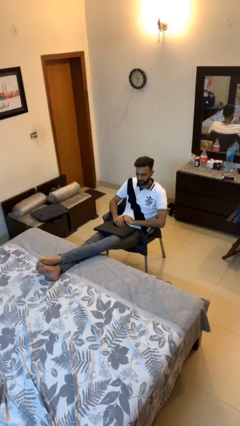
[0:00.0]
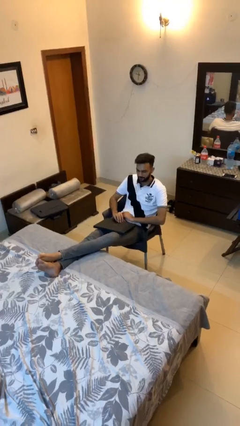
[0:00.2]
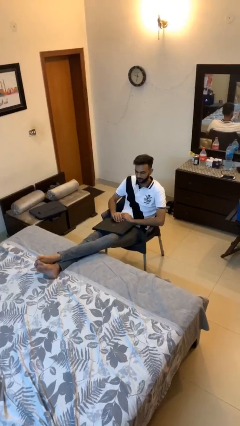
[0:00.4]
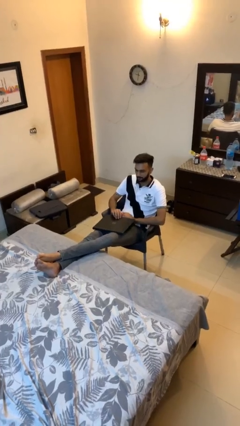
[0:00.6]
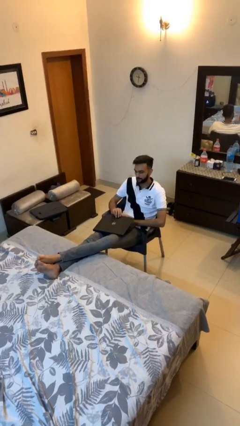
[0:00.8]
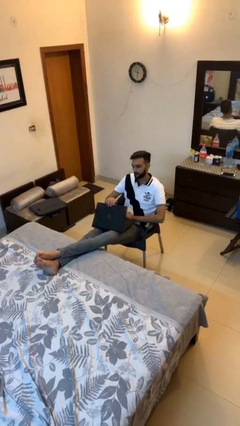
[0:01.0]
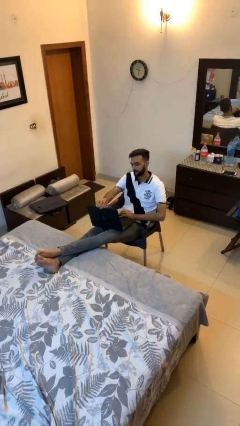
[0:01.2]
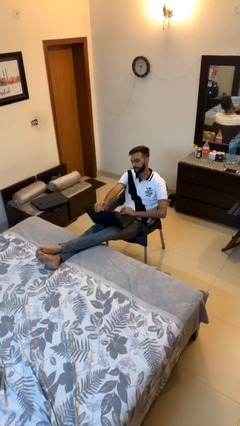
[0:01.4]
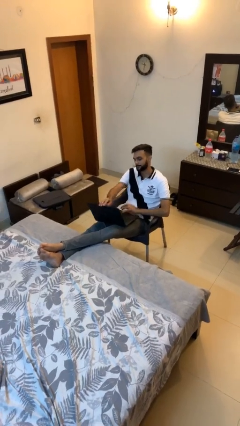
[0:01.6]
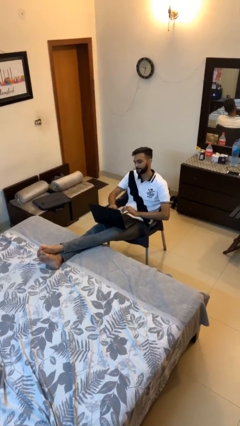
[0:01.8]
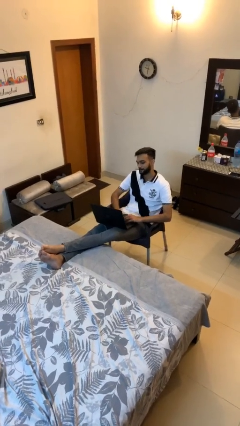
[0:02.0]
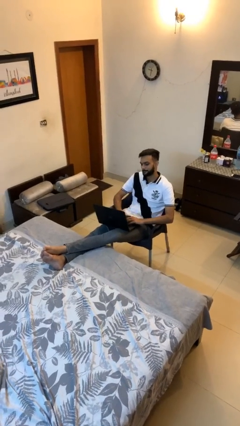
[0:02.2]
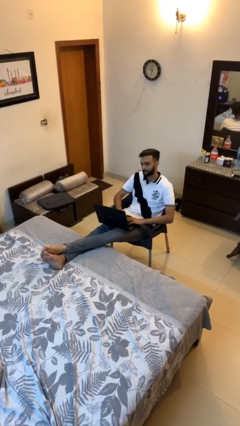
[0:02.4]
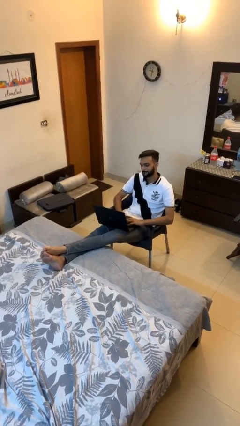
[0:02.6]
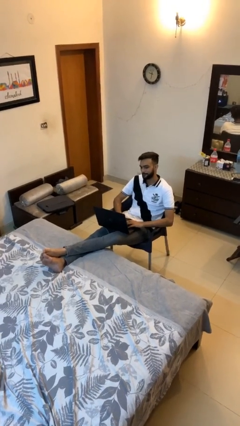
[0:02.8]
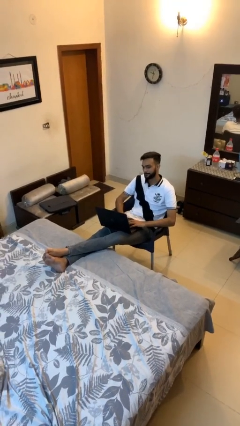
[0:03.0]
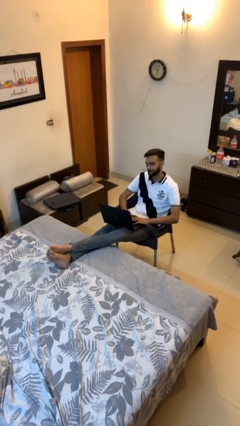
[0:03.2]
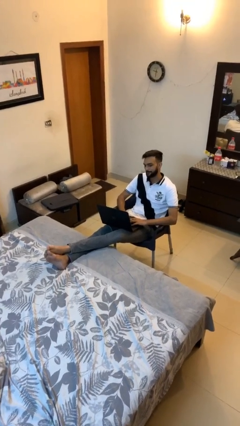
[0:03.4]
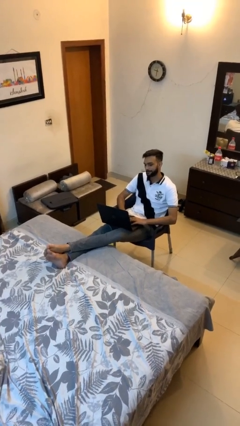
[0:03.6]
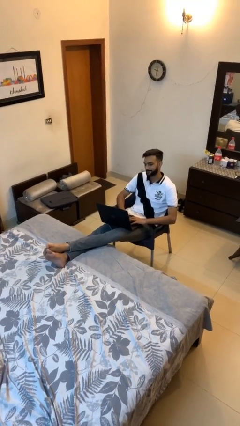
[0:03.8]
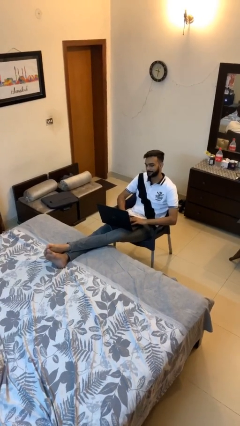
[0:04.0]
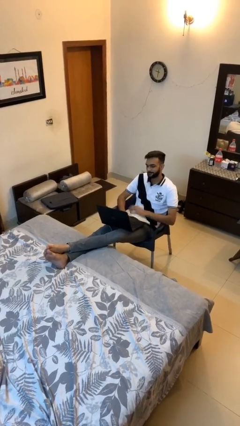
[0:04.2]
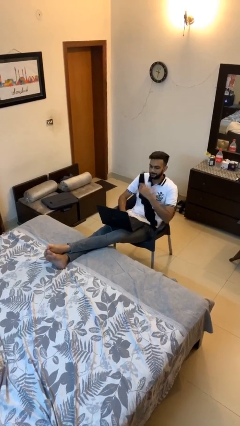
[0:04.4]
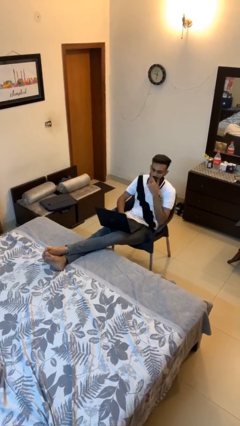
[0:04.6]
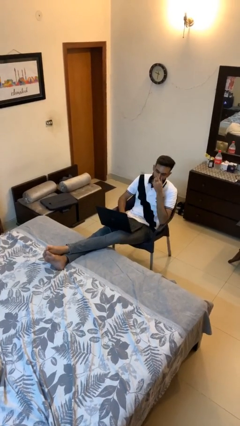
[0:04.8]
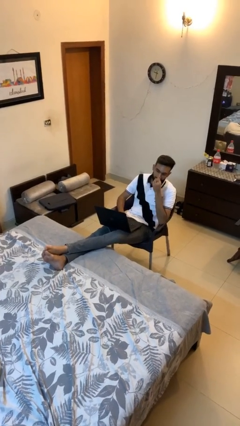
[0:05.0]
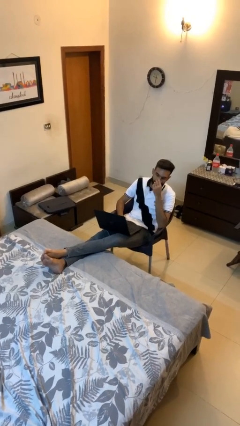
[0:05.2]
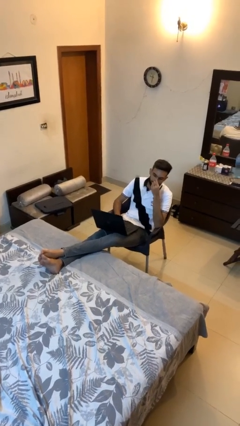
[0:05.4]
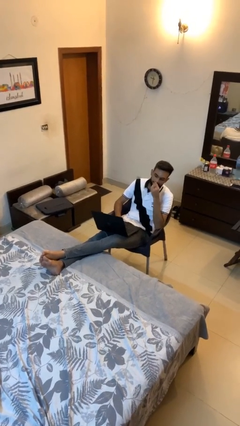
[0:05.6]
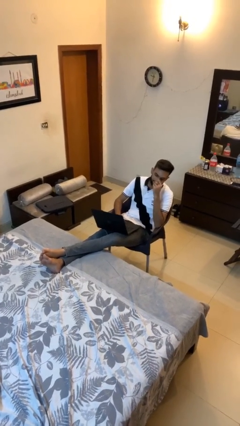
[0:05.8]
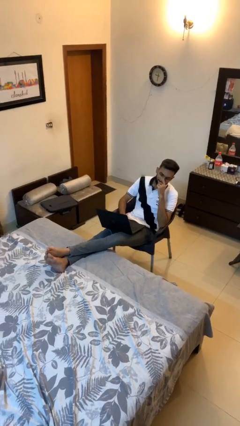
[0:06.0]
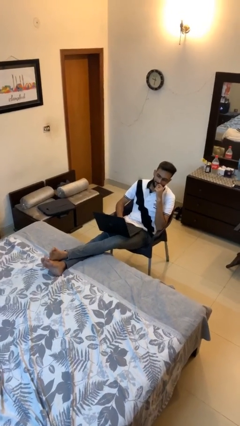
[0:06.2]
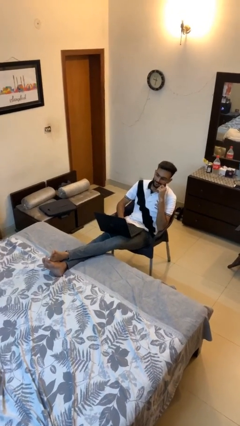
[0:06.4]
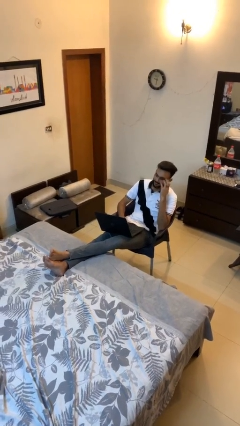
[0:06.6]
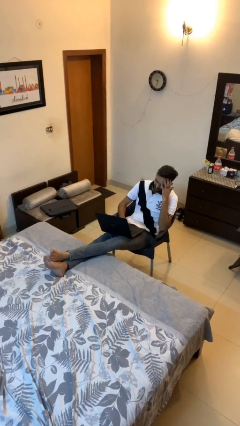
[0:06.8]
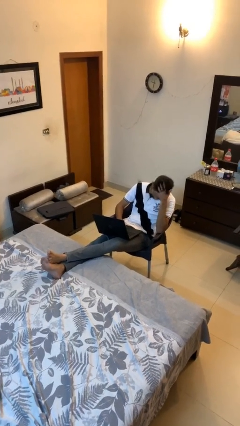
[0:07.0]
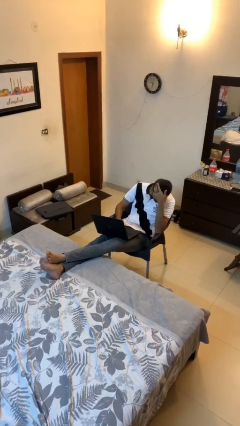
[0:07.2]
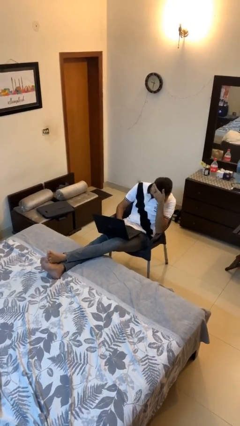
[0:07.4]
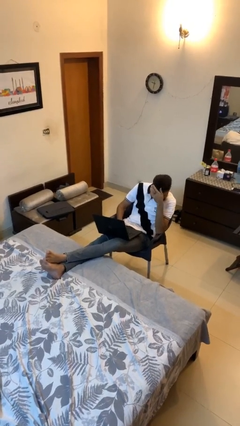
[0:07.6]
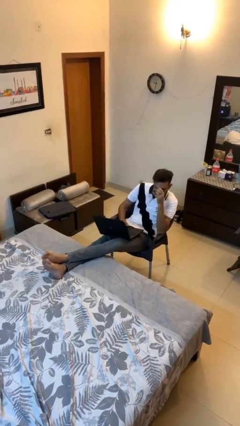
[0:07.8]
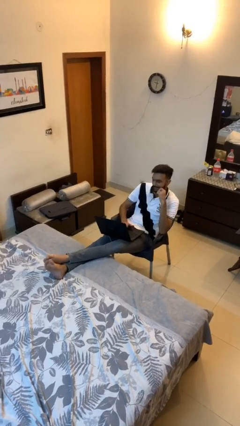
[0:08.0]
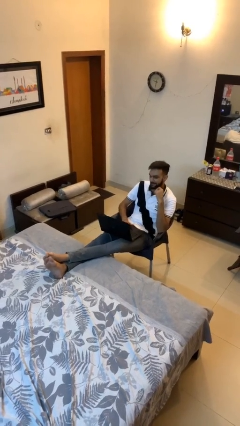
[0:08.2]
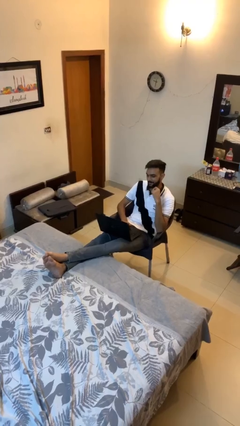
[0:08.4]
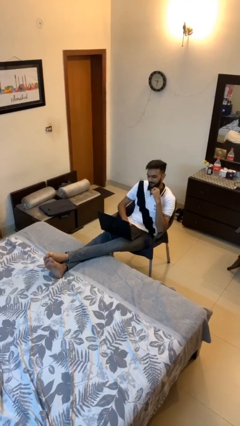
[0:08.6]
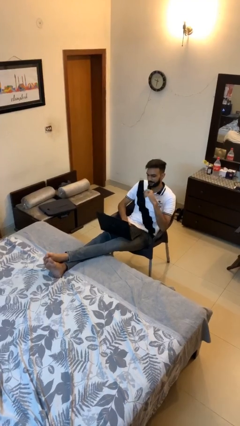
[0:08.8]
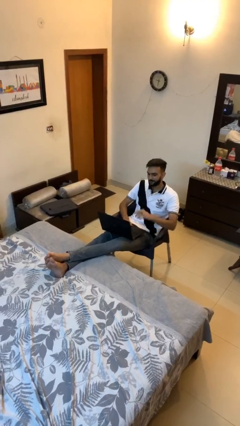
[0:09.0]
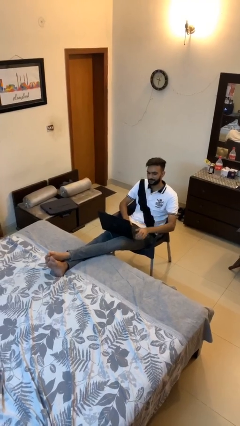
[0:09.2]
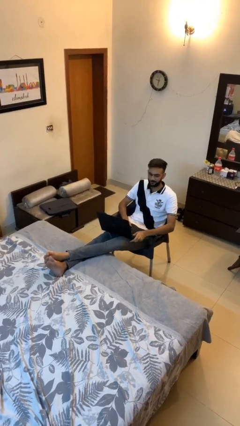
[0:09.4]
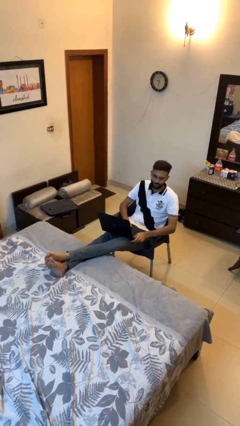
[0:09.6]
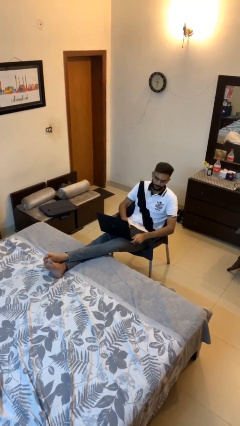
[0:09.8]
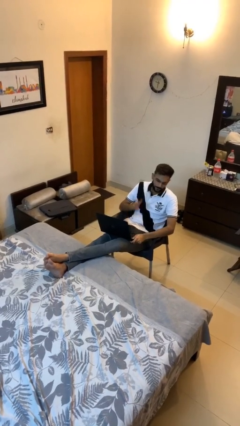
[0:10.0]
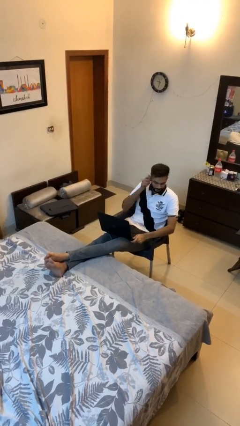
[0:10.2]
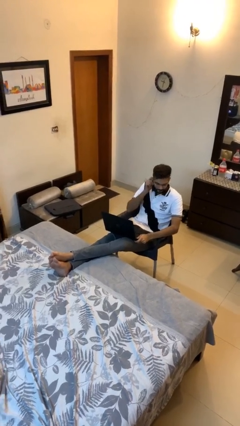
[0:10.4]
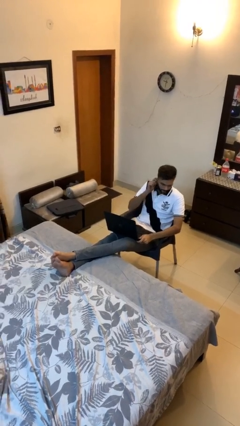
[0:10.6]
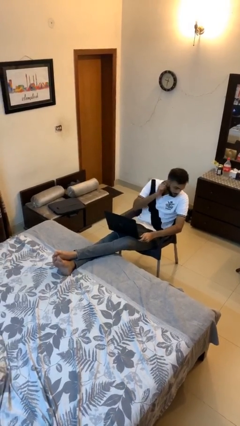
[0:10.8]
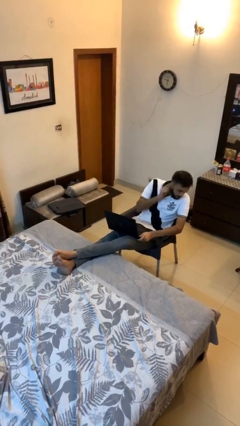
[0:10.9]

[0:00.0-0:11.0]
person interacts with laptop

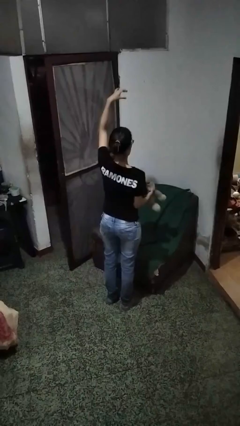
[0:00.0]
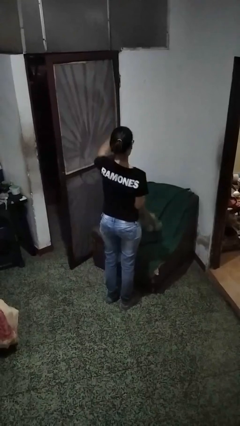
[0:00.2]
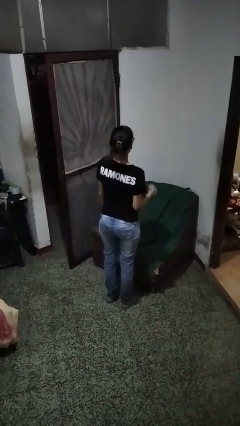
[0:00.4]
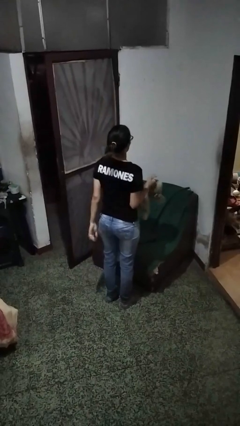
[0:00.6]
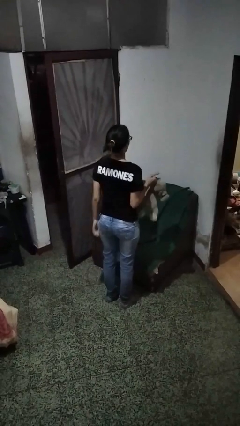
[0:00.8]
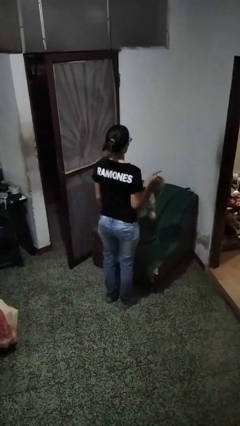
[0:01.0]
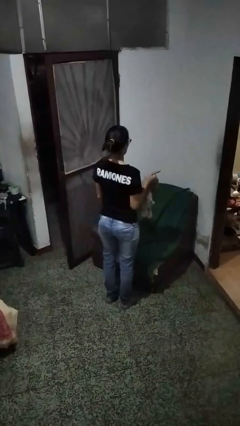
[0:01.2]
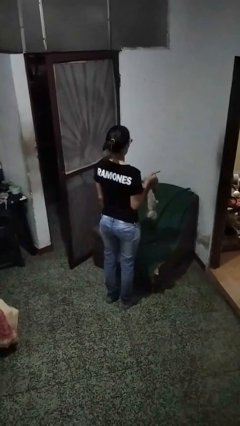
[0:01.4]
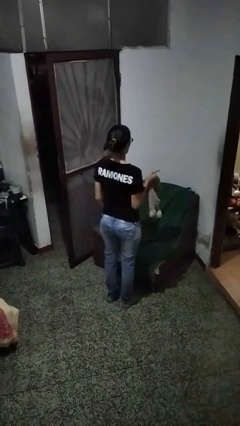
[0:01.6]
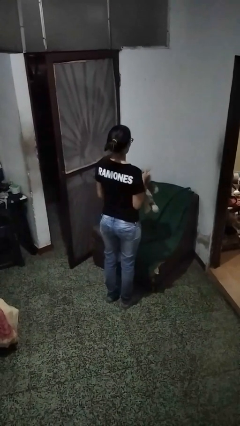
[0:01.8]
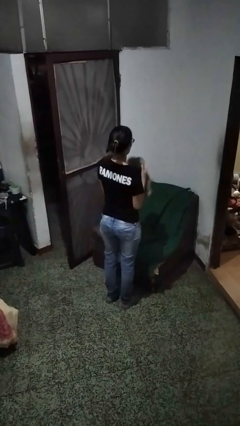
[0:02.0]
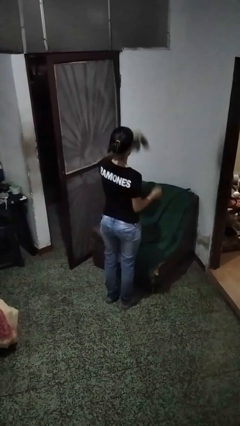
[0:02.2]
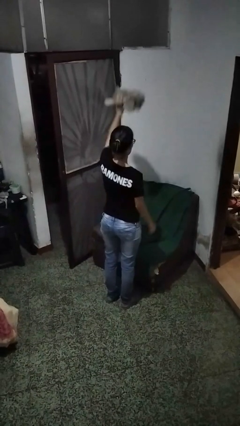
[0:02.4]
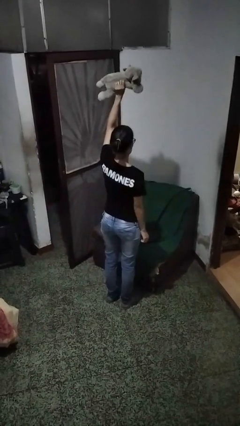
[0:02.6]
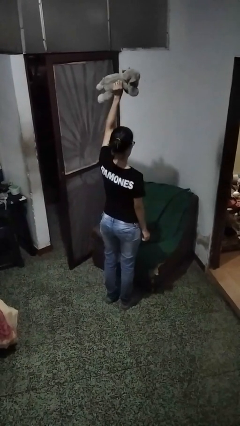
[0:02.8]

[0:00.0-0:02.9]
person catches dropped object

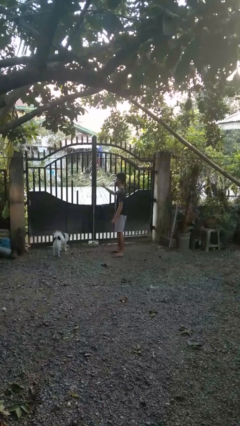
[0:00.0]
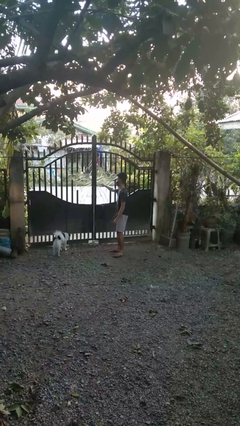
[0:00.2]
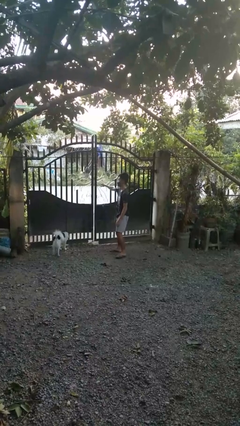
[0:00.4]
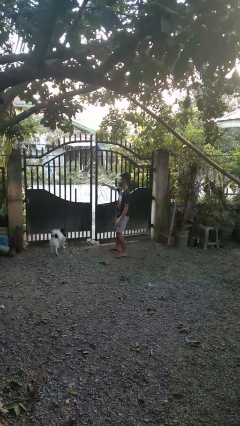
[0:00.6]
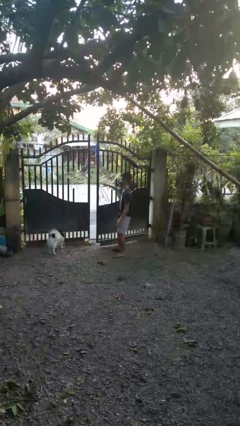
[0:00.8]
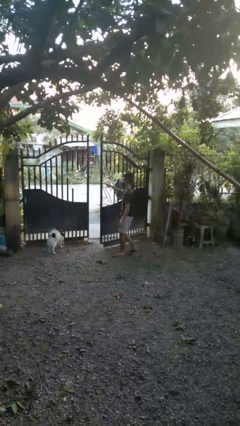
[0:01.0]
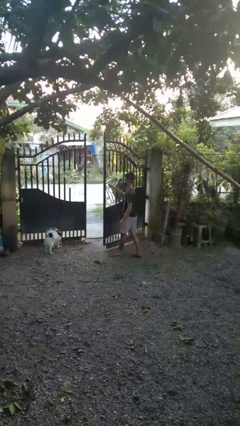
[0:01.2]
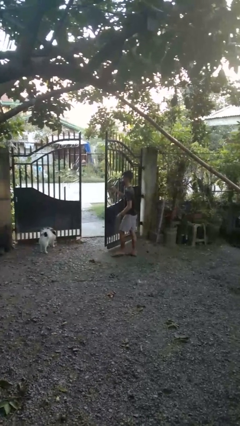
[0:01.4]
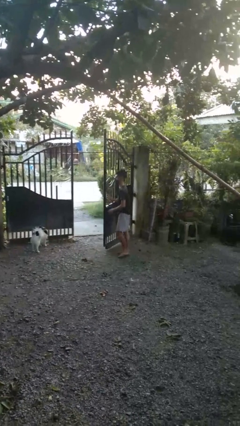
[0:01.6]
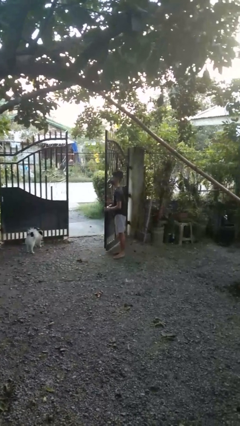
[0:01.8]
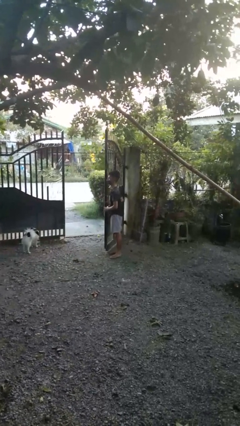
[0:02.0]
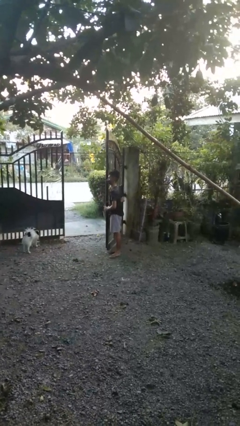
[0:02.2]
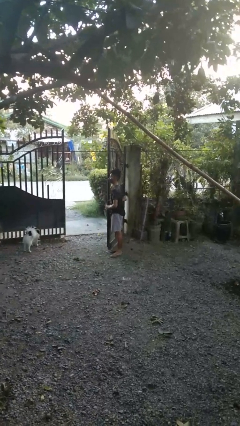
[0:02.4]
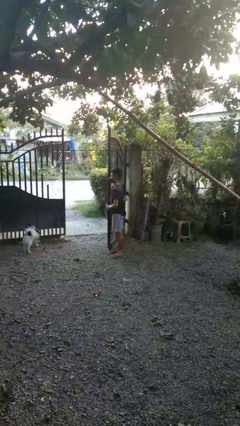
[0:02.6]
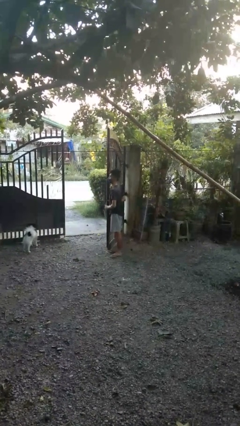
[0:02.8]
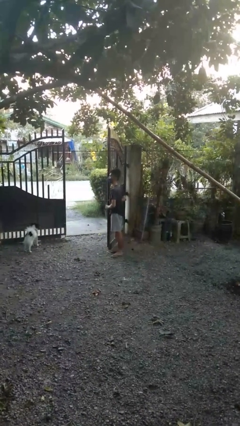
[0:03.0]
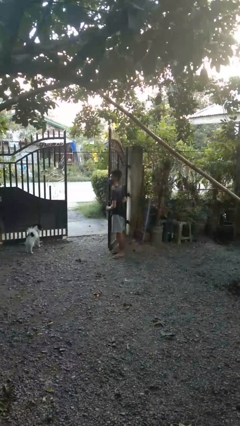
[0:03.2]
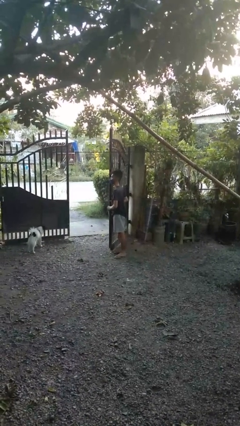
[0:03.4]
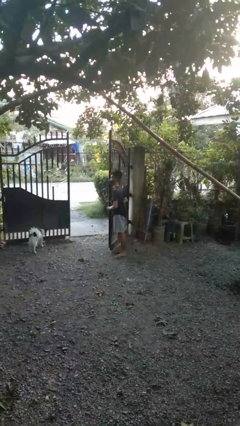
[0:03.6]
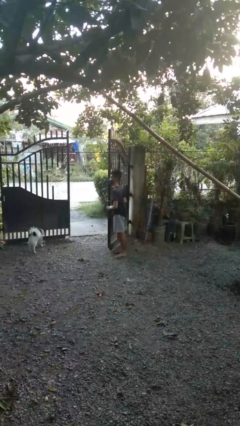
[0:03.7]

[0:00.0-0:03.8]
person opens gate

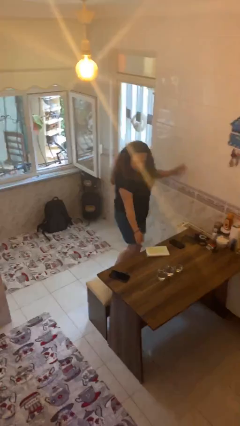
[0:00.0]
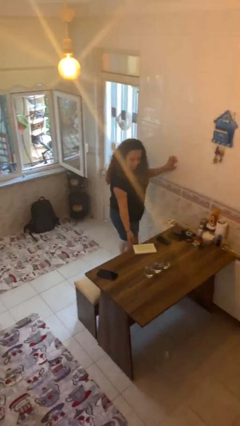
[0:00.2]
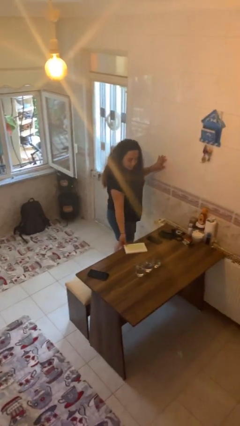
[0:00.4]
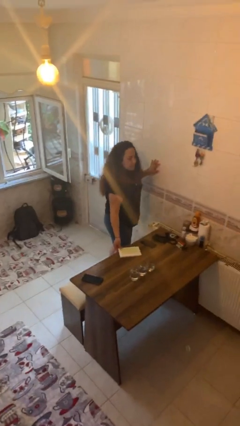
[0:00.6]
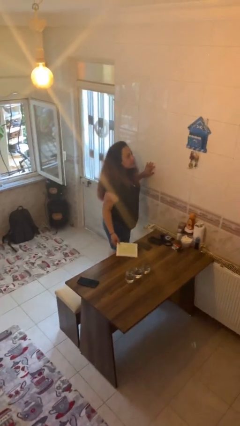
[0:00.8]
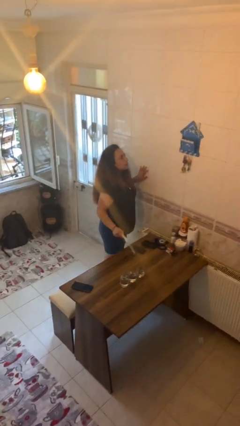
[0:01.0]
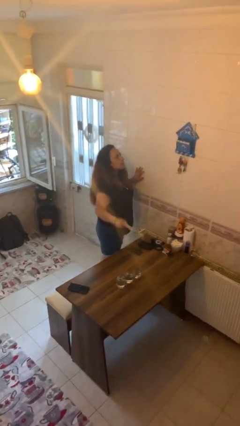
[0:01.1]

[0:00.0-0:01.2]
person picks up object from table
